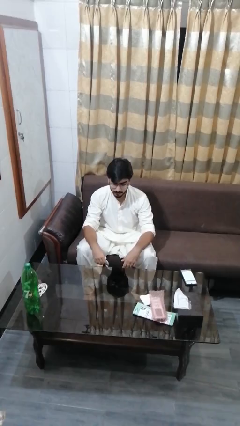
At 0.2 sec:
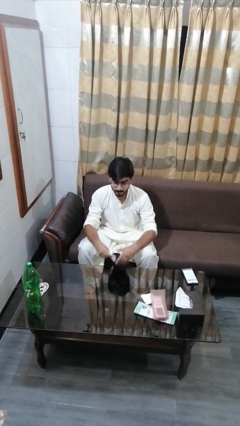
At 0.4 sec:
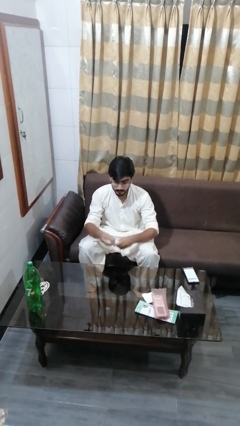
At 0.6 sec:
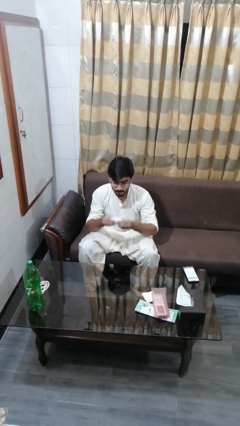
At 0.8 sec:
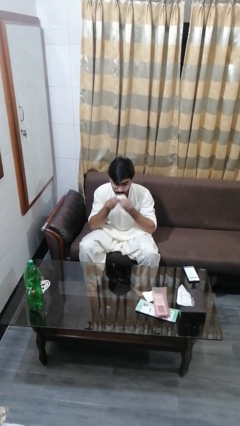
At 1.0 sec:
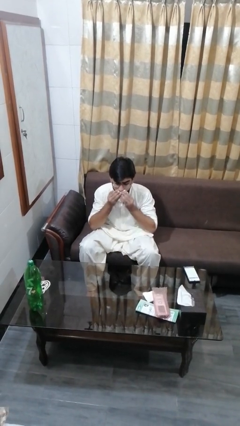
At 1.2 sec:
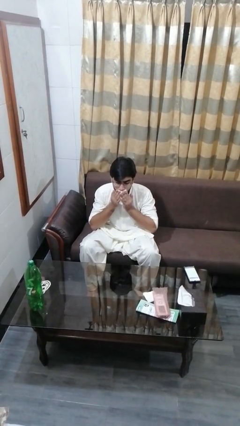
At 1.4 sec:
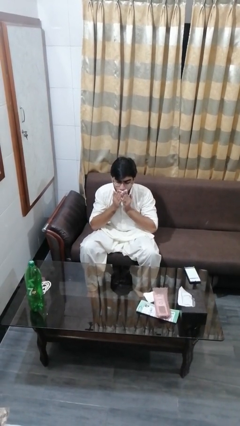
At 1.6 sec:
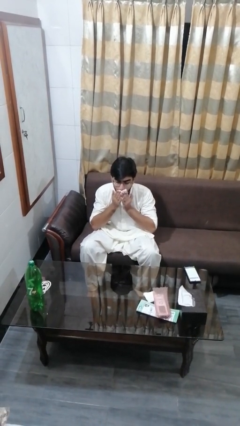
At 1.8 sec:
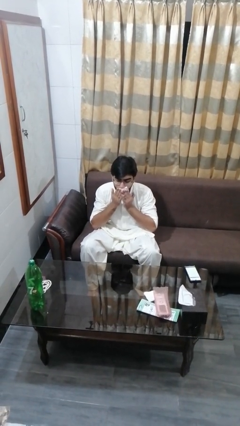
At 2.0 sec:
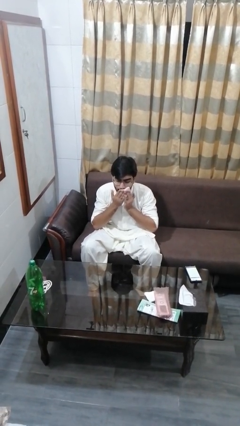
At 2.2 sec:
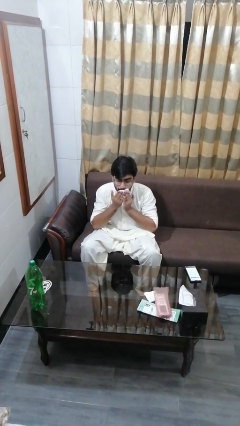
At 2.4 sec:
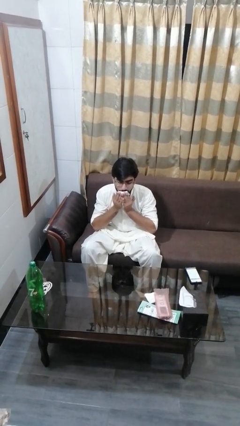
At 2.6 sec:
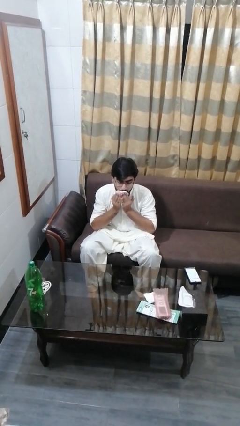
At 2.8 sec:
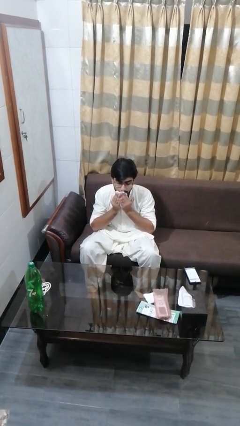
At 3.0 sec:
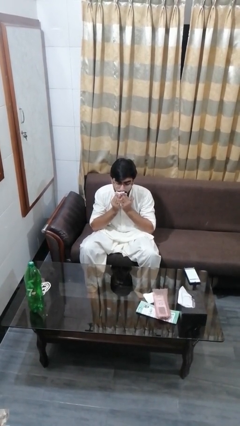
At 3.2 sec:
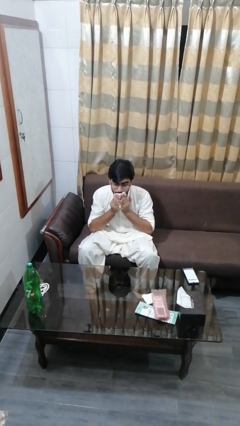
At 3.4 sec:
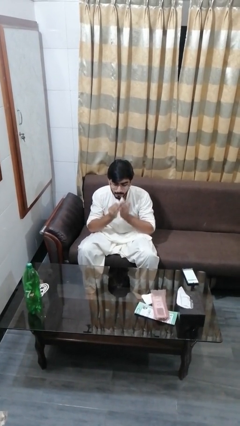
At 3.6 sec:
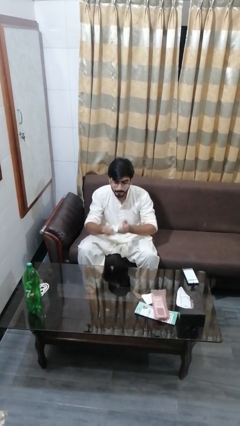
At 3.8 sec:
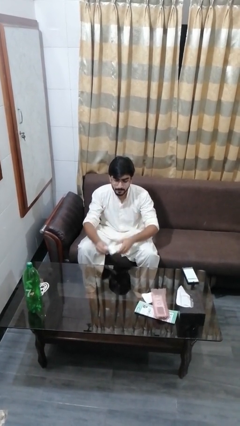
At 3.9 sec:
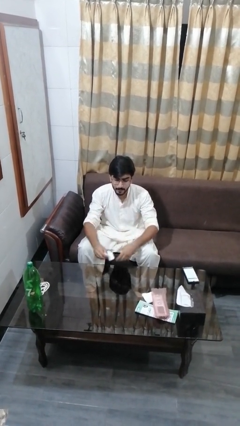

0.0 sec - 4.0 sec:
person wipes mouth with napkin

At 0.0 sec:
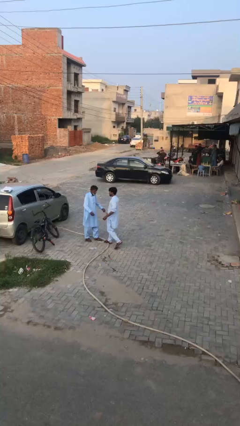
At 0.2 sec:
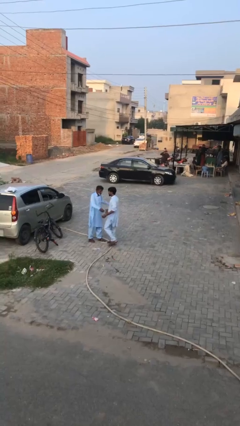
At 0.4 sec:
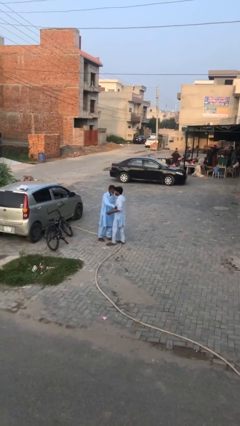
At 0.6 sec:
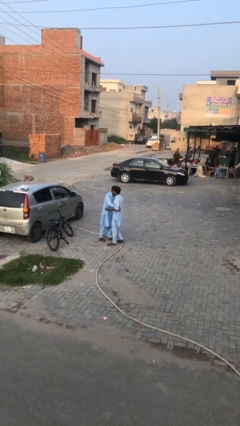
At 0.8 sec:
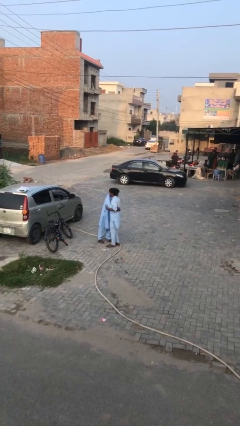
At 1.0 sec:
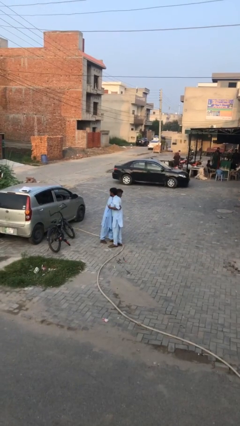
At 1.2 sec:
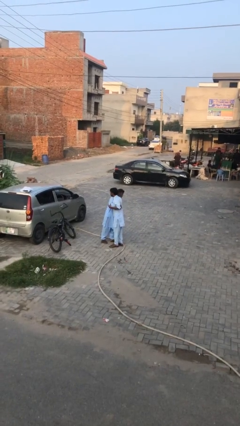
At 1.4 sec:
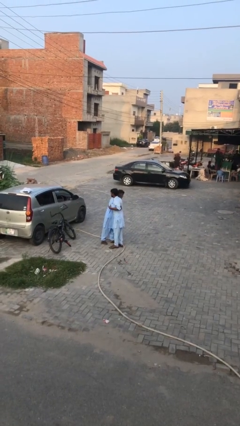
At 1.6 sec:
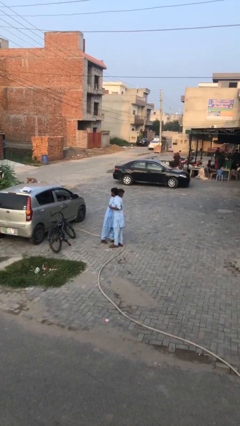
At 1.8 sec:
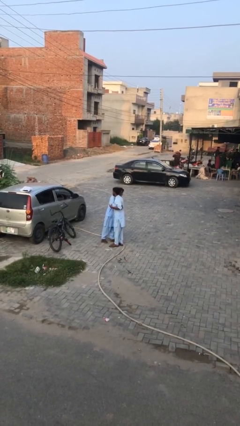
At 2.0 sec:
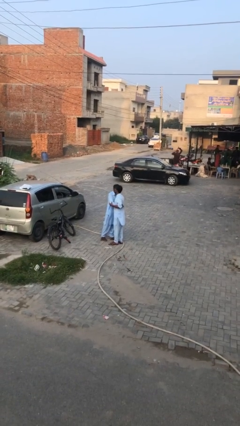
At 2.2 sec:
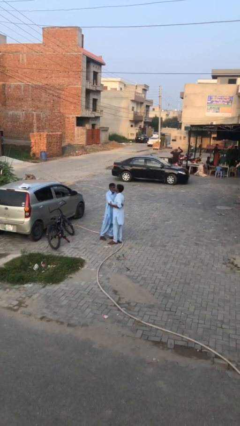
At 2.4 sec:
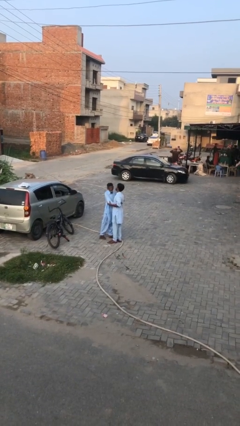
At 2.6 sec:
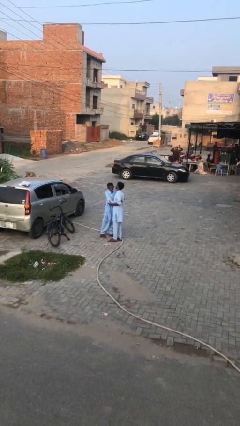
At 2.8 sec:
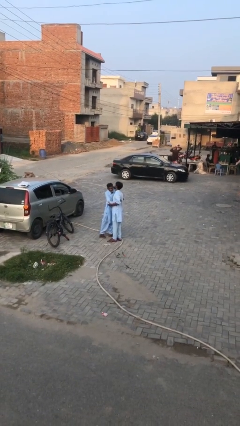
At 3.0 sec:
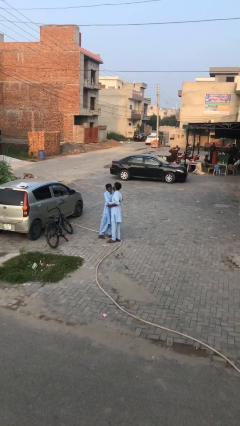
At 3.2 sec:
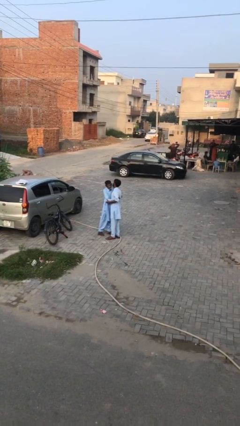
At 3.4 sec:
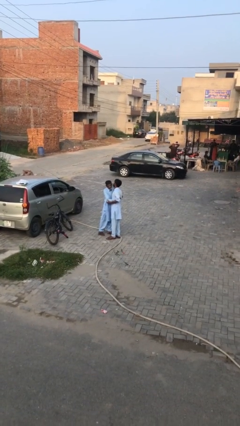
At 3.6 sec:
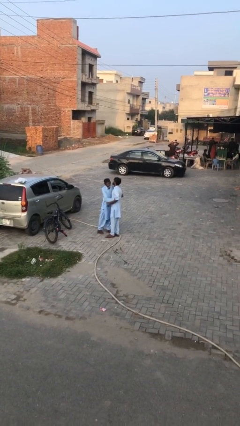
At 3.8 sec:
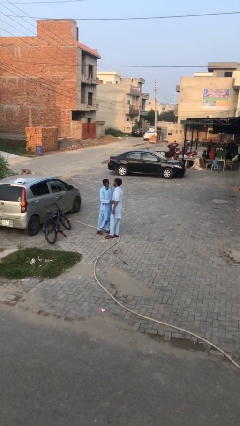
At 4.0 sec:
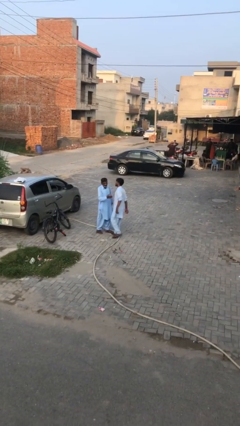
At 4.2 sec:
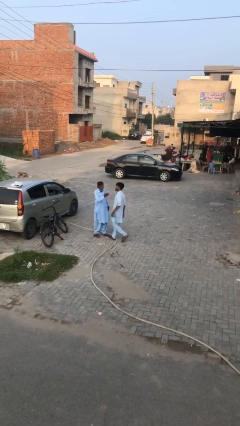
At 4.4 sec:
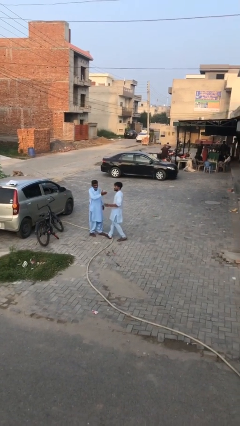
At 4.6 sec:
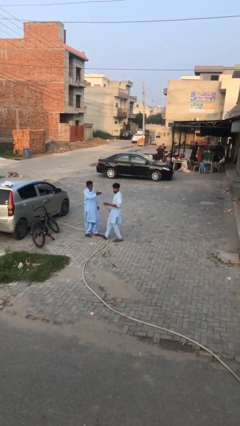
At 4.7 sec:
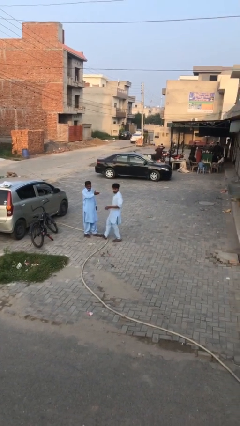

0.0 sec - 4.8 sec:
person embraces person

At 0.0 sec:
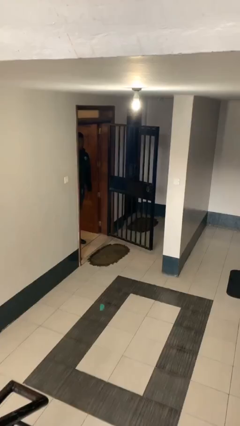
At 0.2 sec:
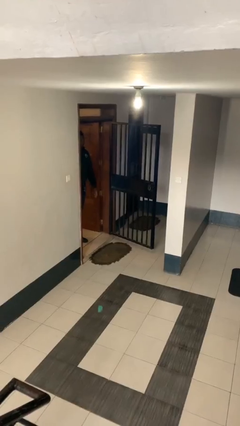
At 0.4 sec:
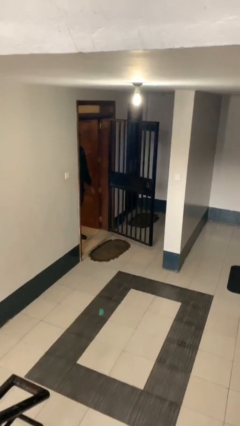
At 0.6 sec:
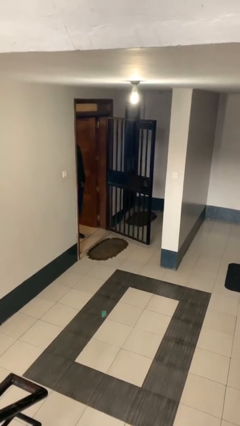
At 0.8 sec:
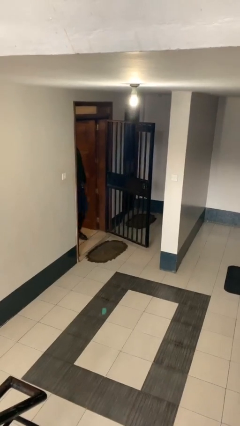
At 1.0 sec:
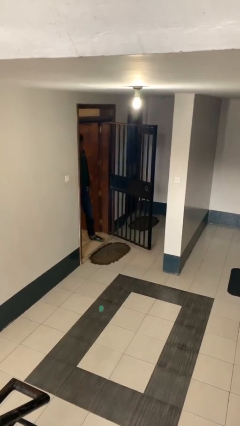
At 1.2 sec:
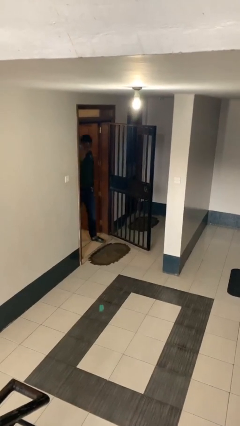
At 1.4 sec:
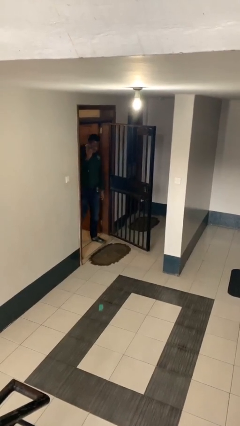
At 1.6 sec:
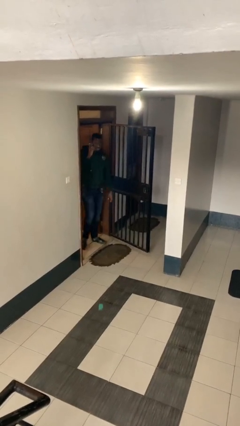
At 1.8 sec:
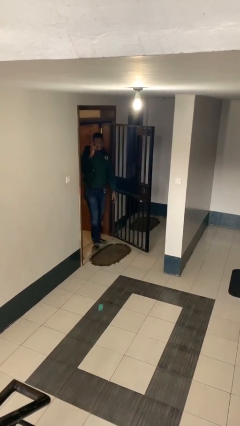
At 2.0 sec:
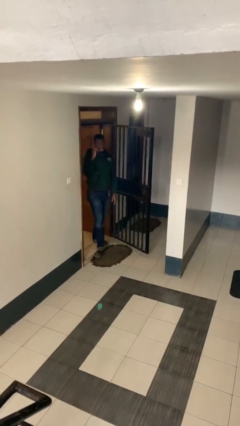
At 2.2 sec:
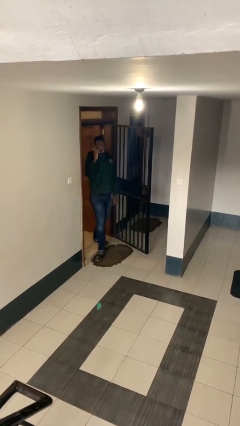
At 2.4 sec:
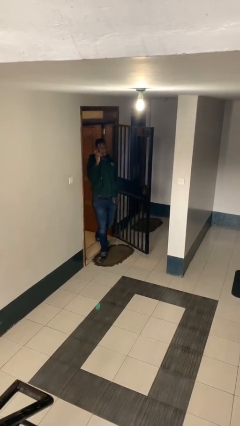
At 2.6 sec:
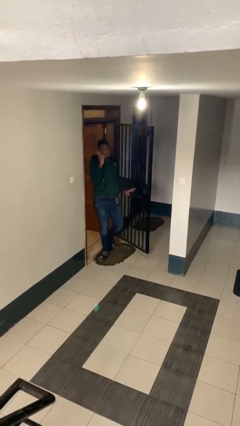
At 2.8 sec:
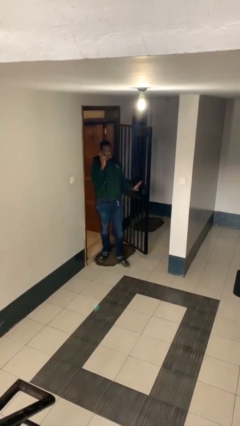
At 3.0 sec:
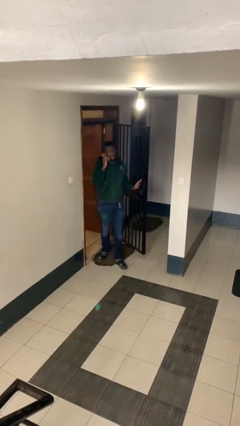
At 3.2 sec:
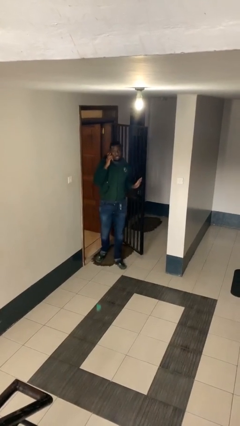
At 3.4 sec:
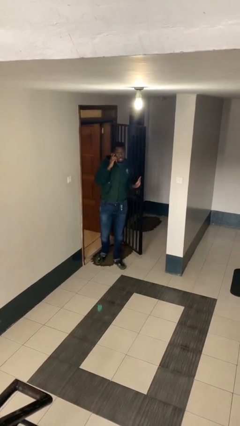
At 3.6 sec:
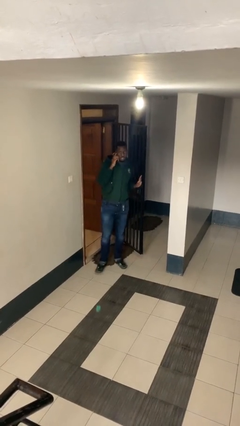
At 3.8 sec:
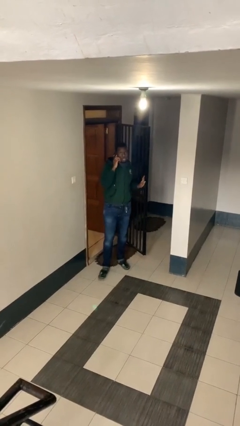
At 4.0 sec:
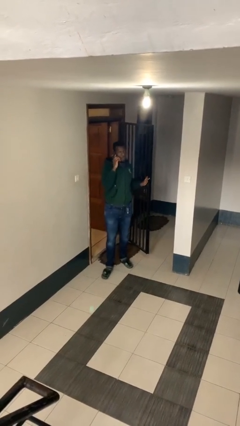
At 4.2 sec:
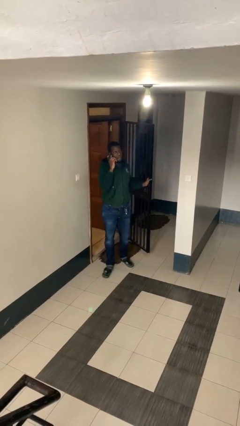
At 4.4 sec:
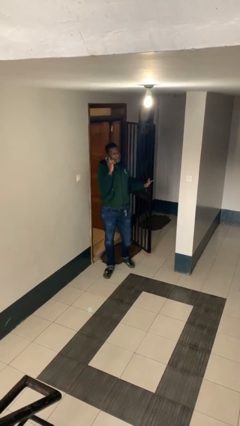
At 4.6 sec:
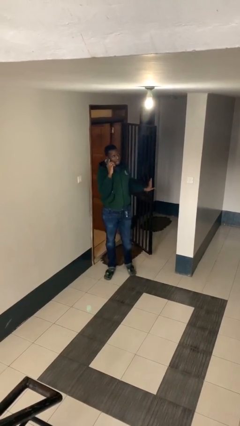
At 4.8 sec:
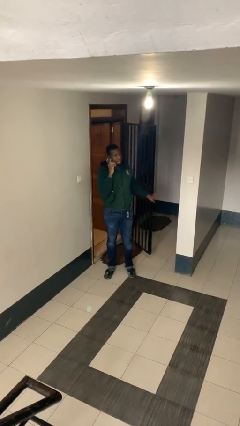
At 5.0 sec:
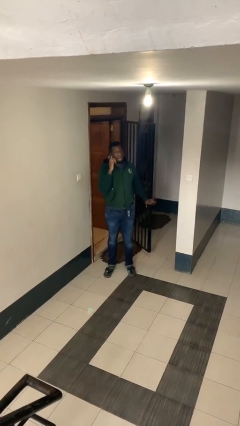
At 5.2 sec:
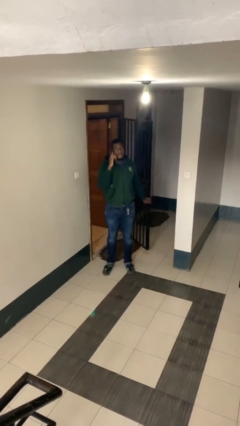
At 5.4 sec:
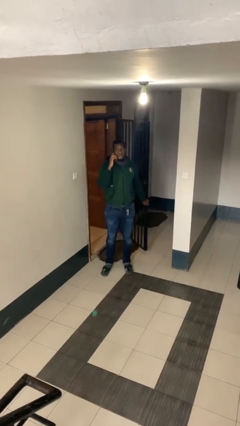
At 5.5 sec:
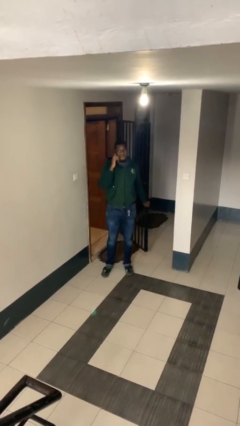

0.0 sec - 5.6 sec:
person enters scene through structure

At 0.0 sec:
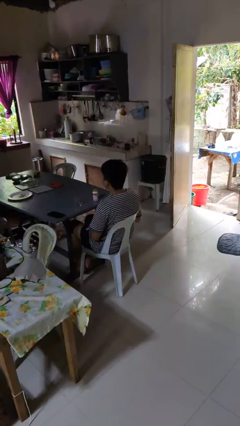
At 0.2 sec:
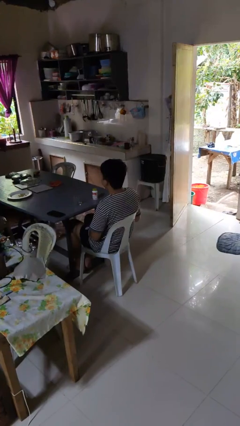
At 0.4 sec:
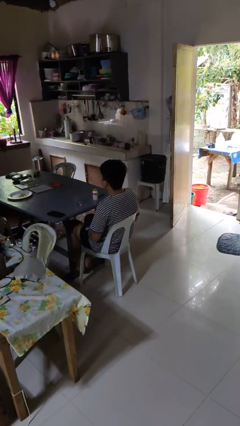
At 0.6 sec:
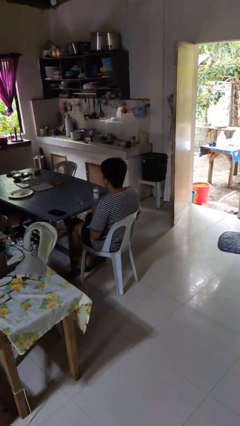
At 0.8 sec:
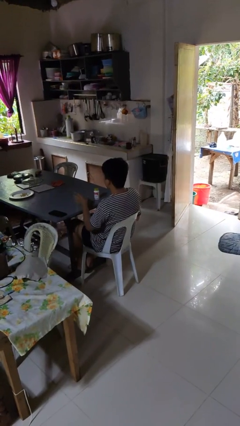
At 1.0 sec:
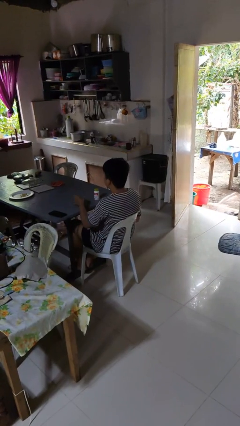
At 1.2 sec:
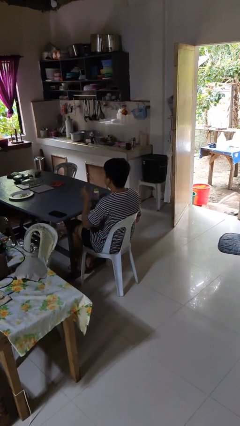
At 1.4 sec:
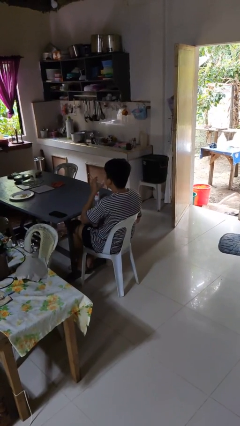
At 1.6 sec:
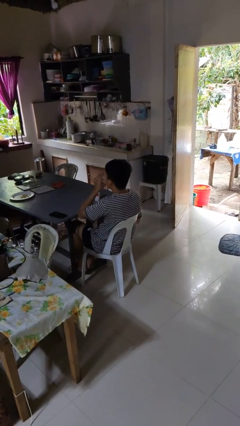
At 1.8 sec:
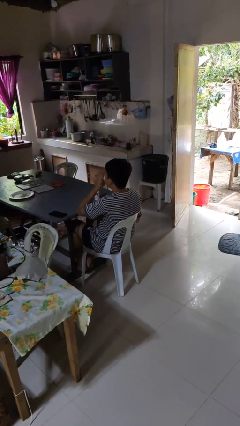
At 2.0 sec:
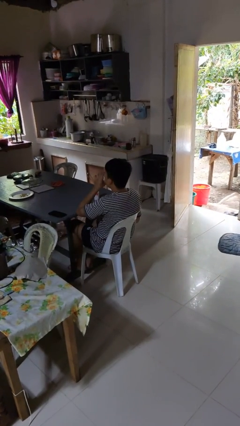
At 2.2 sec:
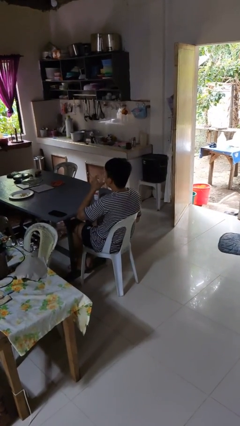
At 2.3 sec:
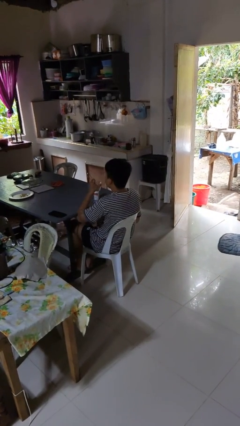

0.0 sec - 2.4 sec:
person drinks from cup

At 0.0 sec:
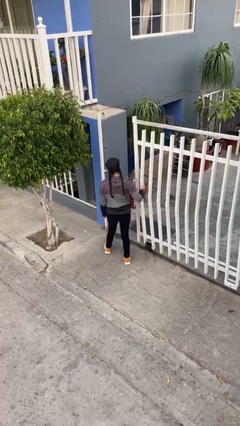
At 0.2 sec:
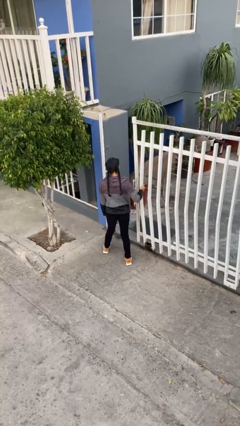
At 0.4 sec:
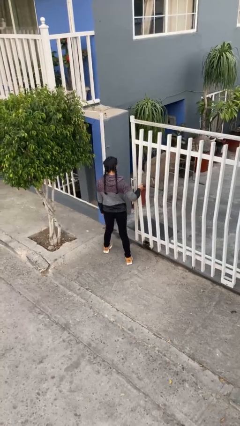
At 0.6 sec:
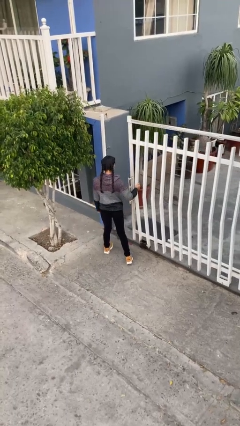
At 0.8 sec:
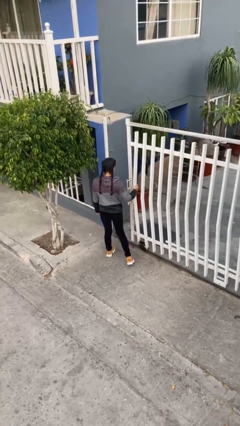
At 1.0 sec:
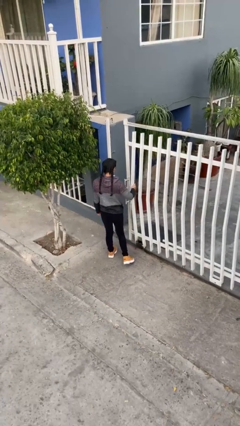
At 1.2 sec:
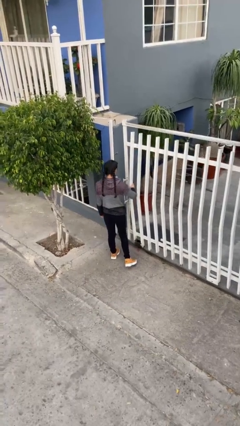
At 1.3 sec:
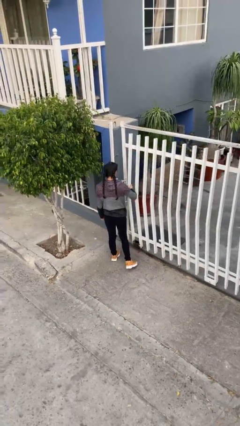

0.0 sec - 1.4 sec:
person closes facility door
